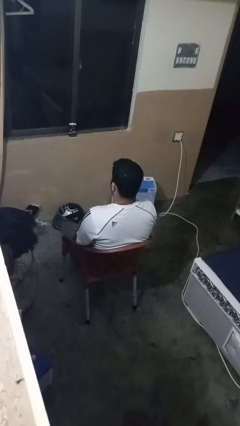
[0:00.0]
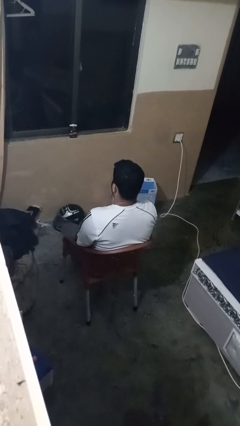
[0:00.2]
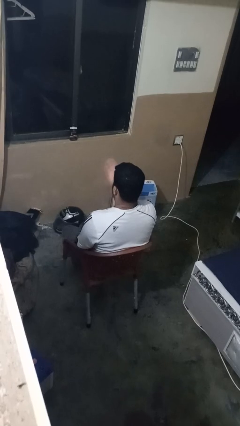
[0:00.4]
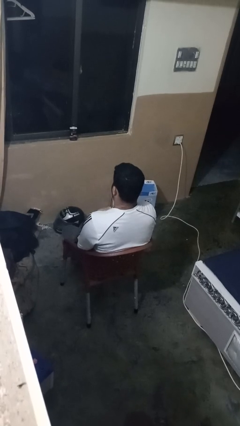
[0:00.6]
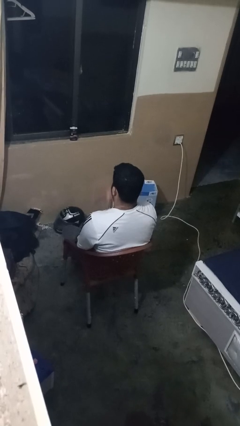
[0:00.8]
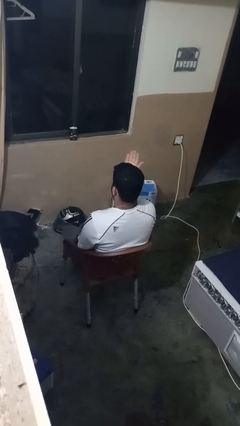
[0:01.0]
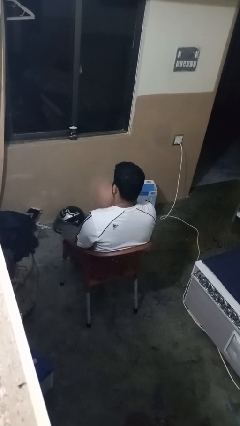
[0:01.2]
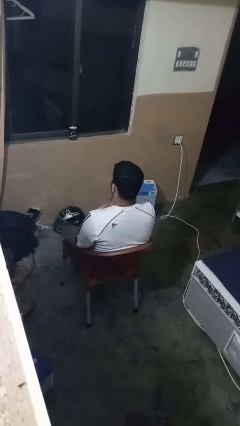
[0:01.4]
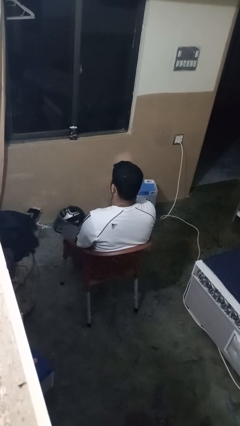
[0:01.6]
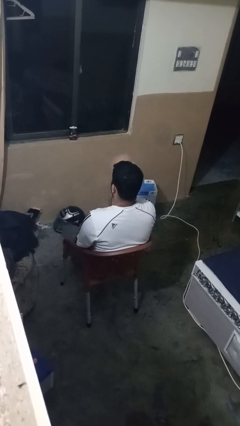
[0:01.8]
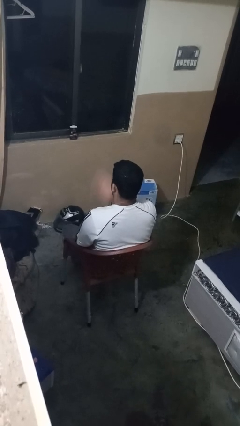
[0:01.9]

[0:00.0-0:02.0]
person drums on chest

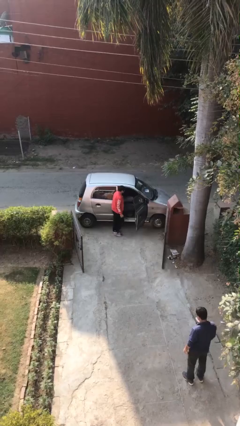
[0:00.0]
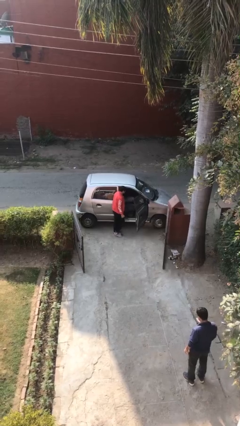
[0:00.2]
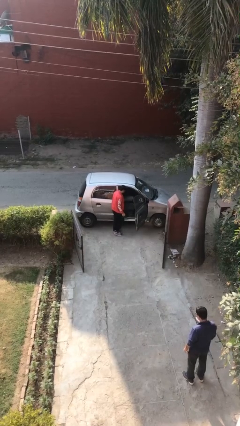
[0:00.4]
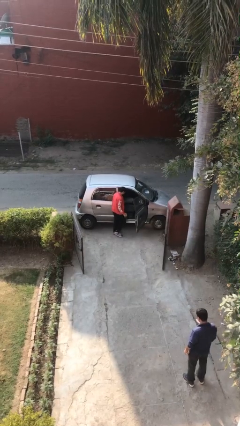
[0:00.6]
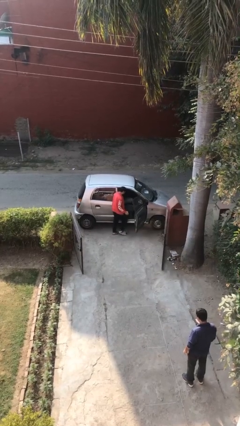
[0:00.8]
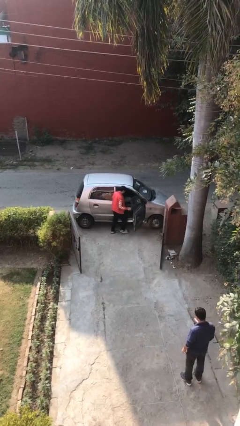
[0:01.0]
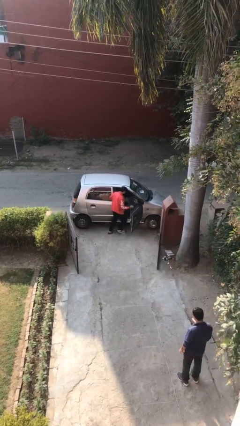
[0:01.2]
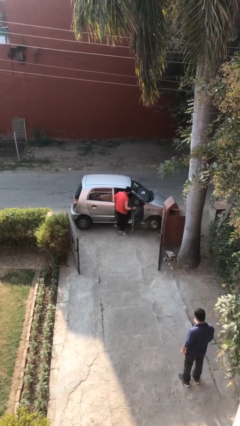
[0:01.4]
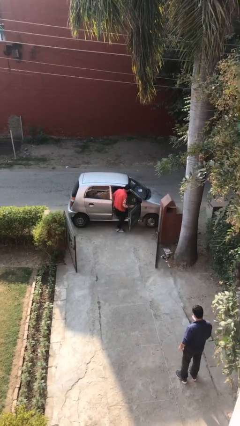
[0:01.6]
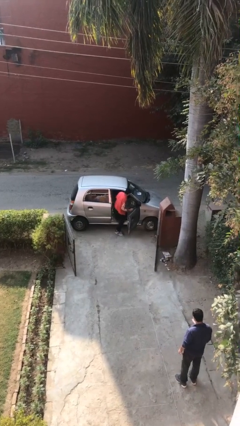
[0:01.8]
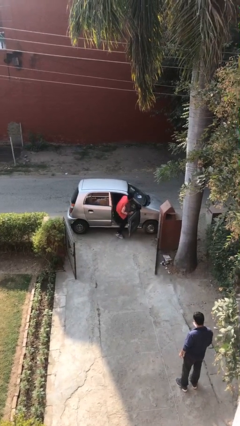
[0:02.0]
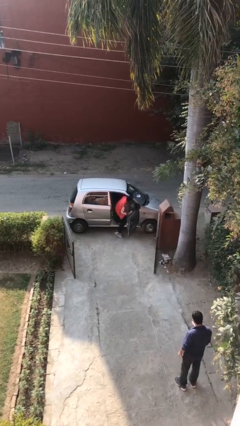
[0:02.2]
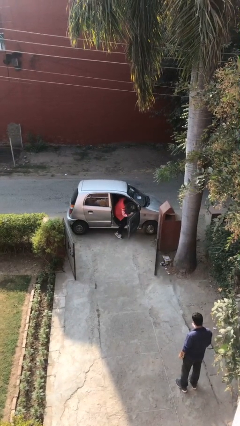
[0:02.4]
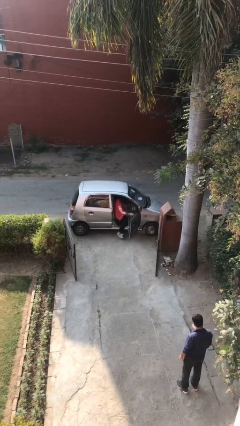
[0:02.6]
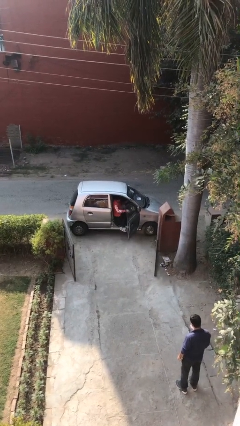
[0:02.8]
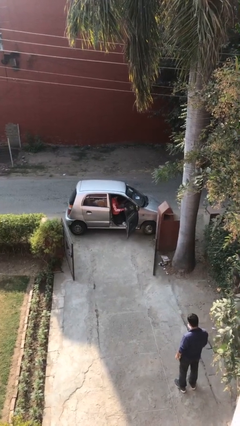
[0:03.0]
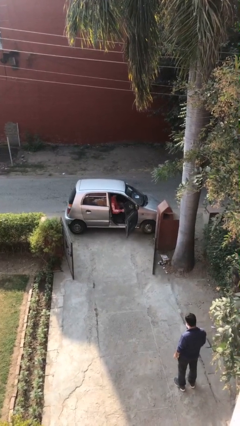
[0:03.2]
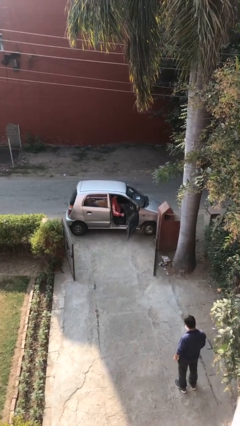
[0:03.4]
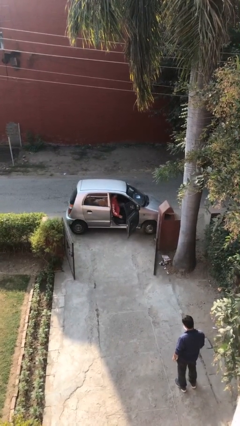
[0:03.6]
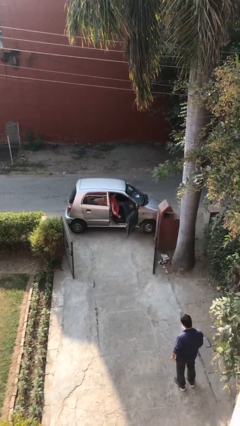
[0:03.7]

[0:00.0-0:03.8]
person enters car

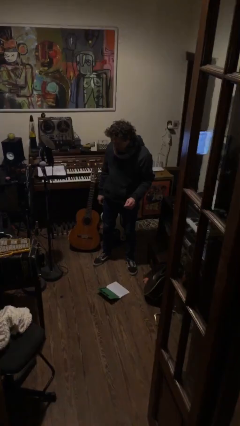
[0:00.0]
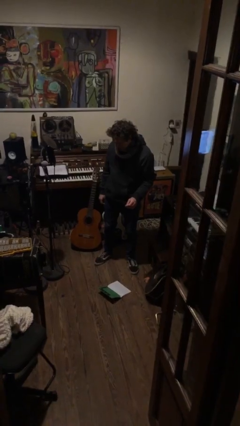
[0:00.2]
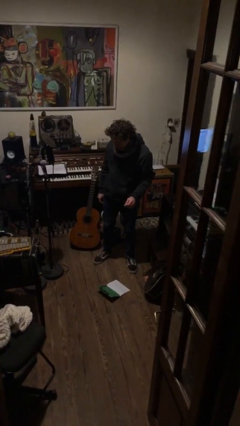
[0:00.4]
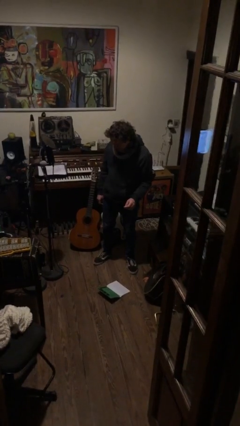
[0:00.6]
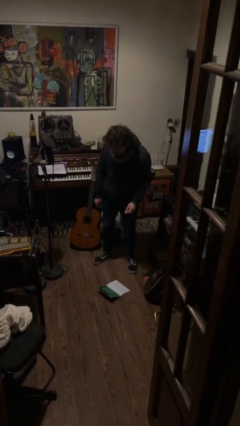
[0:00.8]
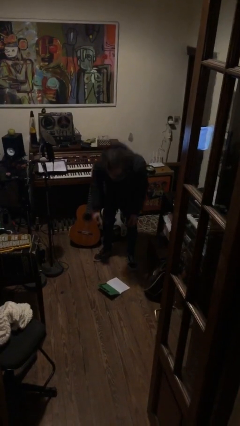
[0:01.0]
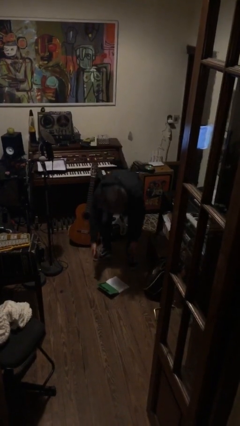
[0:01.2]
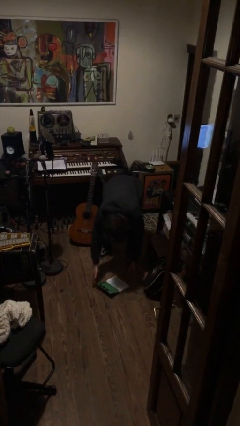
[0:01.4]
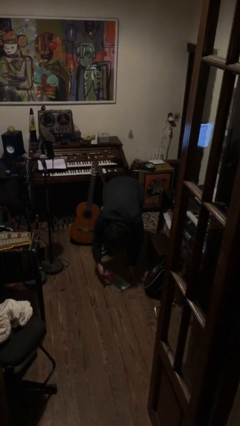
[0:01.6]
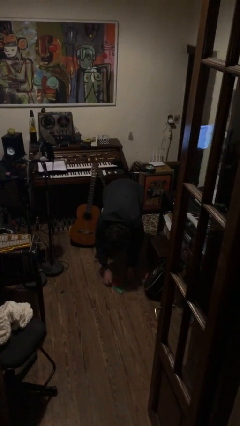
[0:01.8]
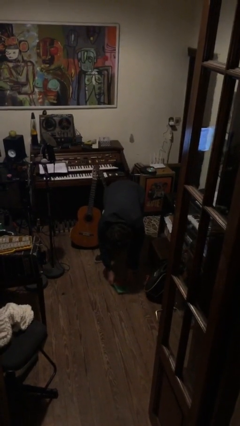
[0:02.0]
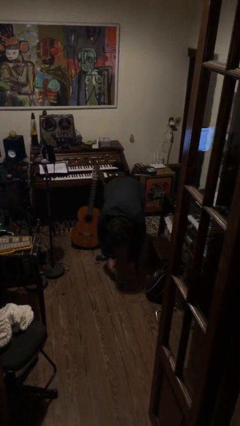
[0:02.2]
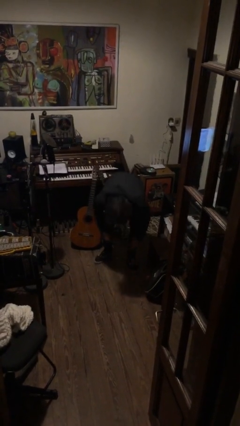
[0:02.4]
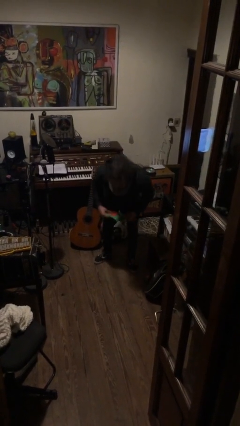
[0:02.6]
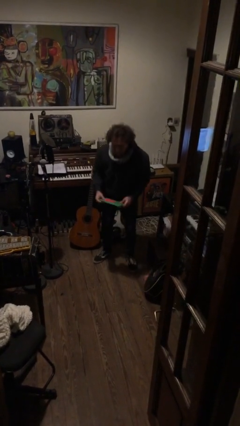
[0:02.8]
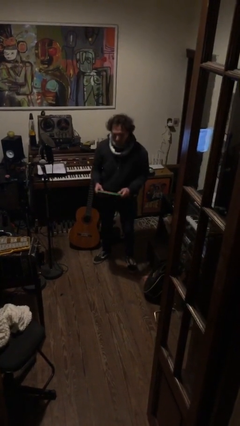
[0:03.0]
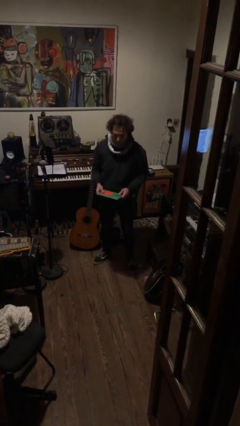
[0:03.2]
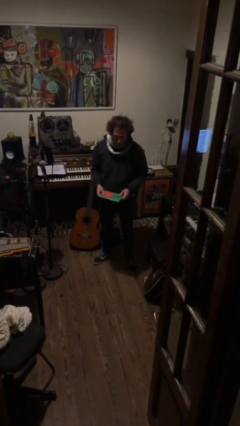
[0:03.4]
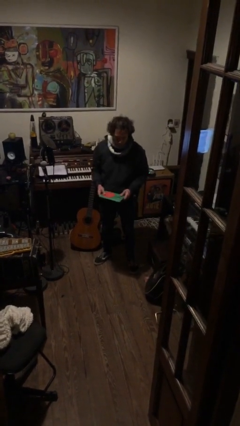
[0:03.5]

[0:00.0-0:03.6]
person picks up object from floor

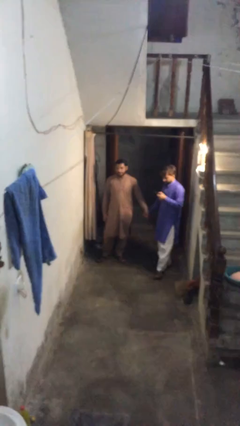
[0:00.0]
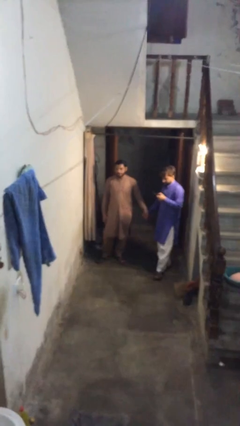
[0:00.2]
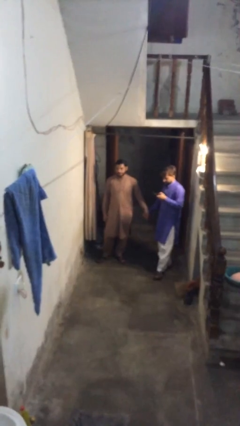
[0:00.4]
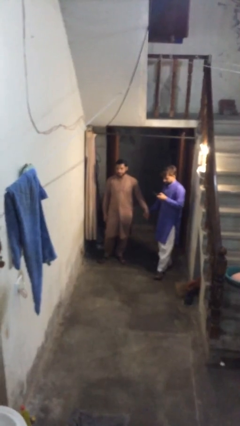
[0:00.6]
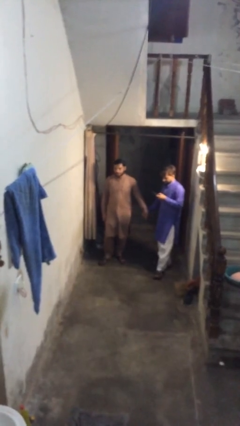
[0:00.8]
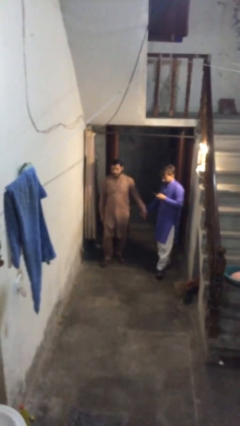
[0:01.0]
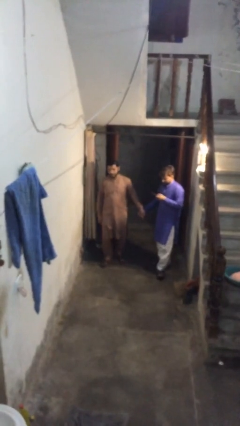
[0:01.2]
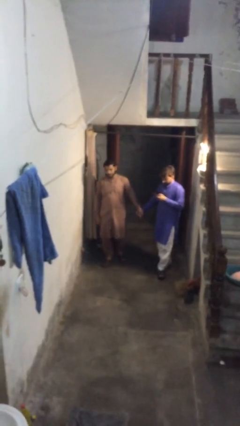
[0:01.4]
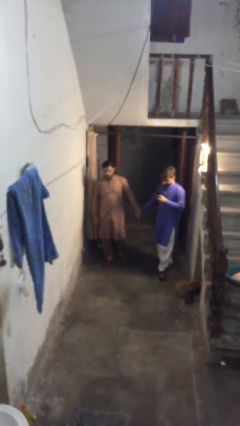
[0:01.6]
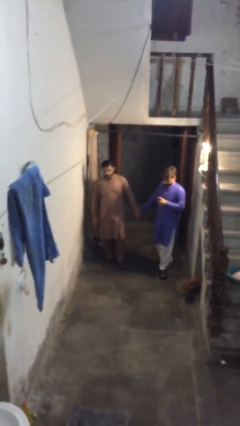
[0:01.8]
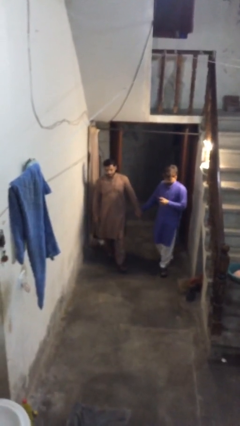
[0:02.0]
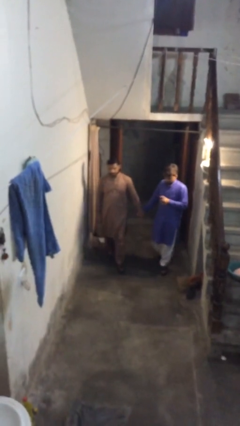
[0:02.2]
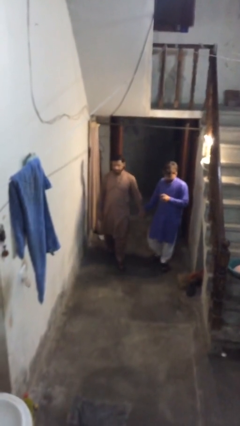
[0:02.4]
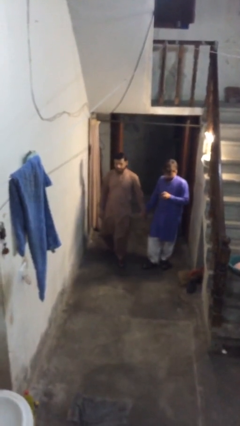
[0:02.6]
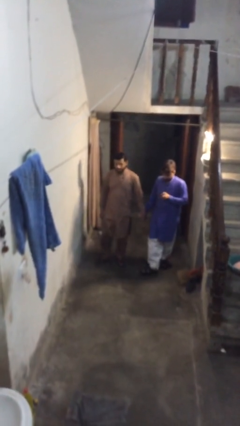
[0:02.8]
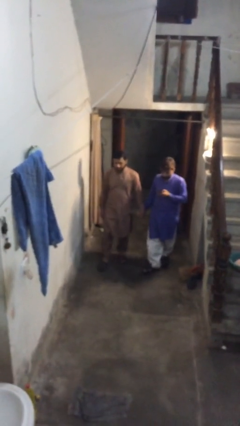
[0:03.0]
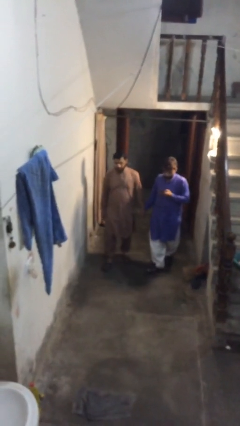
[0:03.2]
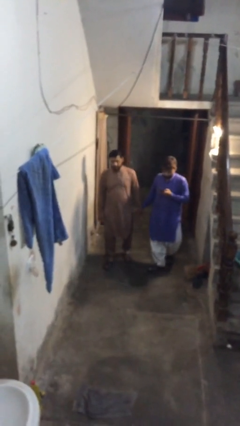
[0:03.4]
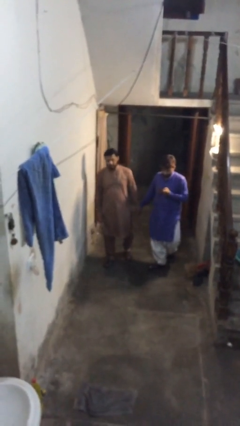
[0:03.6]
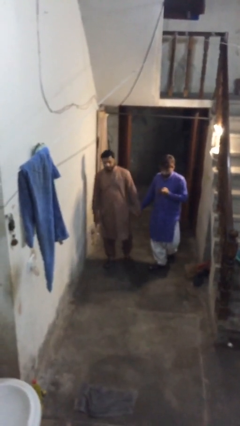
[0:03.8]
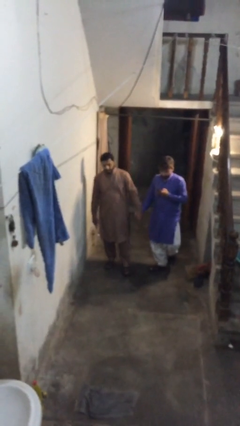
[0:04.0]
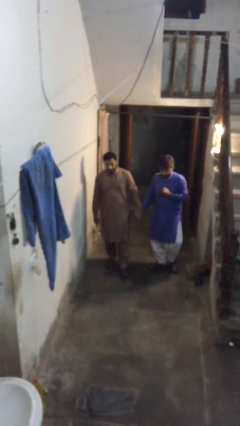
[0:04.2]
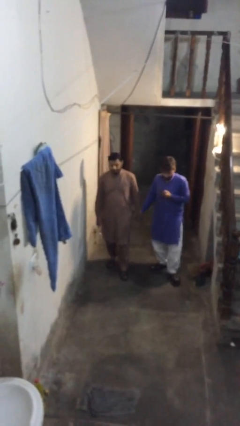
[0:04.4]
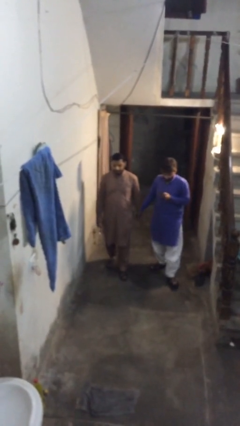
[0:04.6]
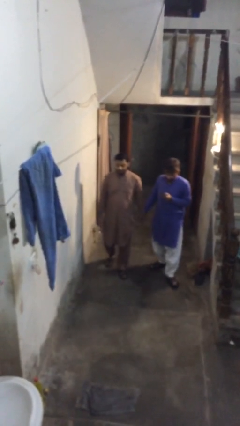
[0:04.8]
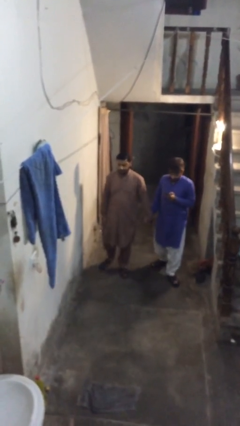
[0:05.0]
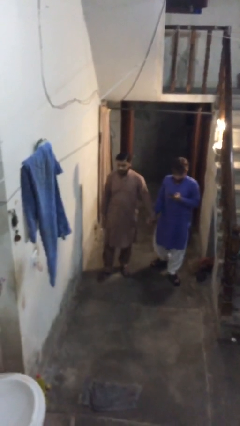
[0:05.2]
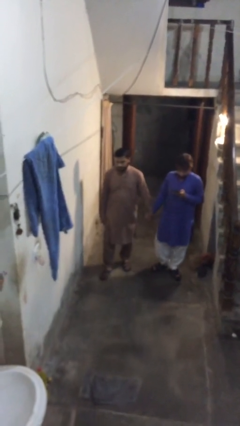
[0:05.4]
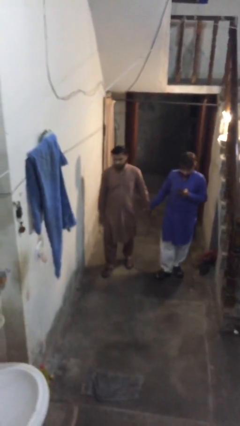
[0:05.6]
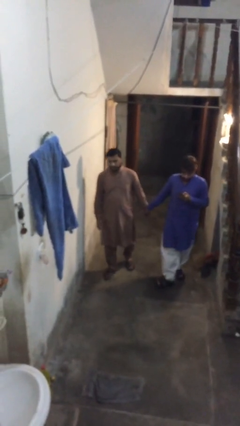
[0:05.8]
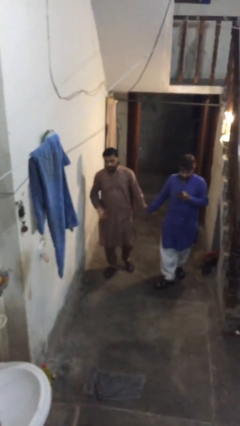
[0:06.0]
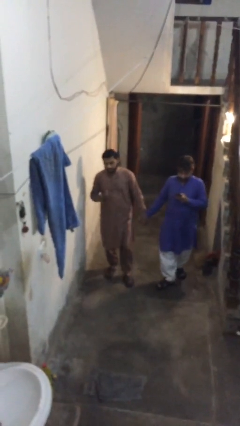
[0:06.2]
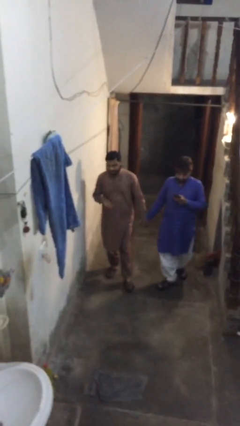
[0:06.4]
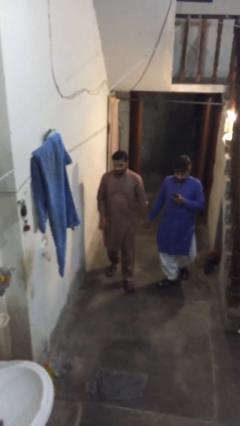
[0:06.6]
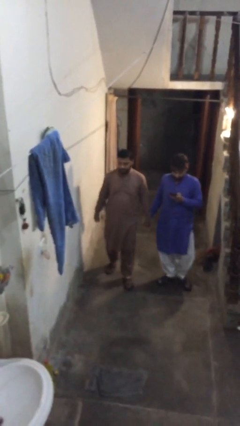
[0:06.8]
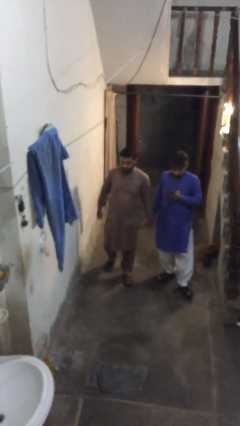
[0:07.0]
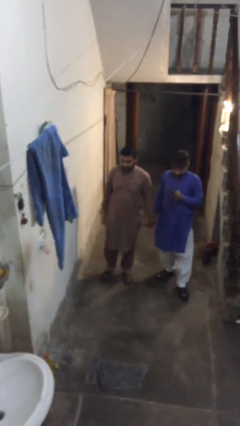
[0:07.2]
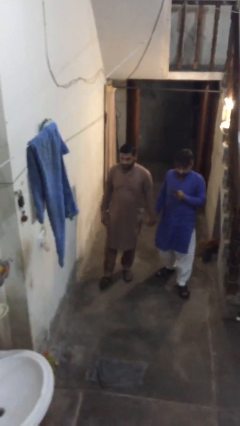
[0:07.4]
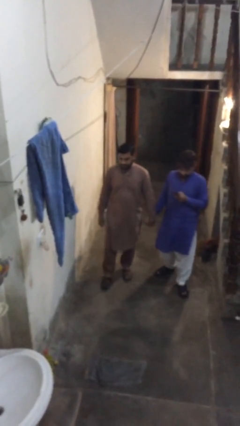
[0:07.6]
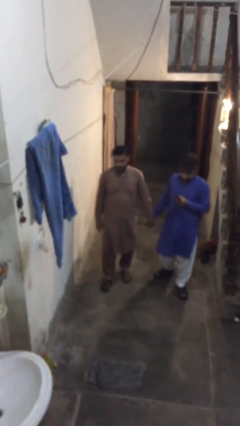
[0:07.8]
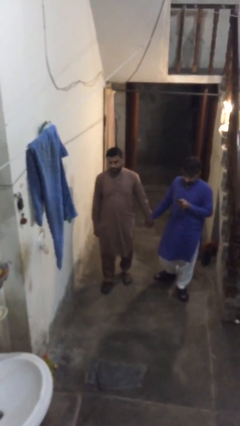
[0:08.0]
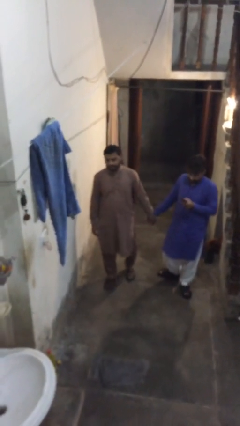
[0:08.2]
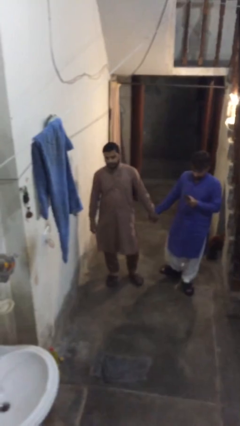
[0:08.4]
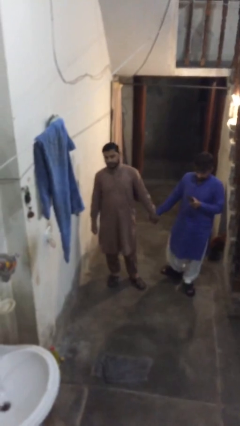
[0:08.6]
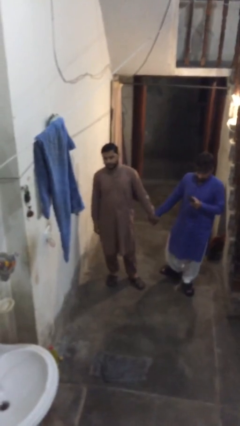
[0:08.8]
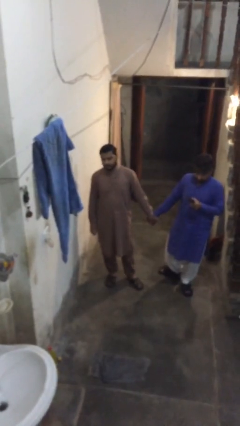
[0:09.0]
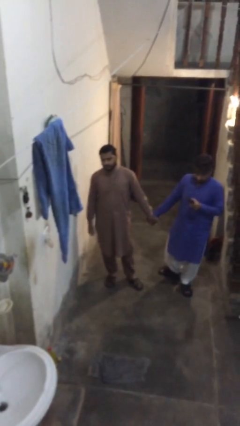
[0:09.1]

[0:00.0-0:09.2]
person holds hand
